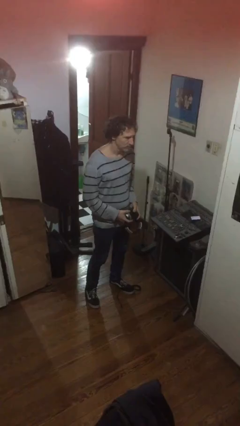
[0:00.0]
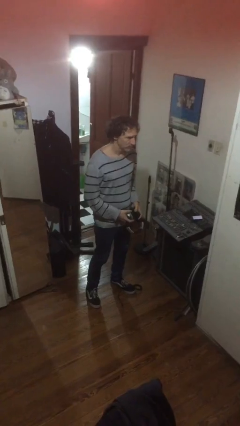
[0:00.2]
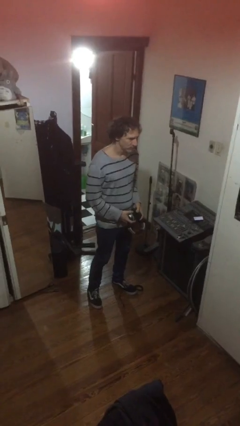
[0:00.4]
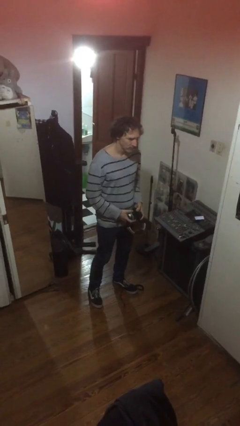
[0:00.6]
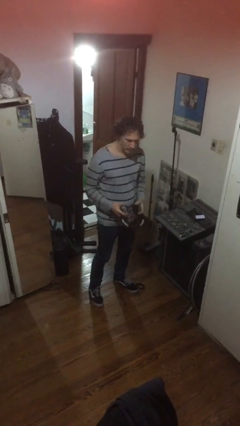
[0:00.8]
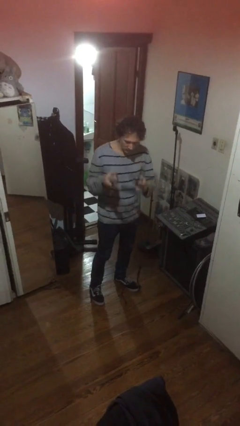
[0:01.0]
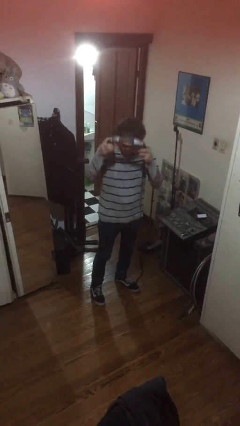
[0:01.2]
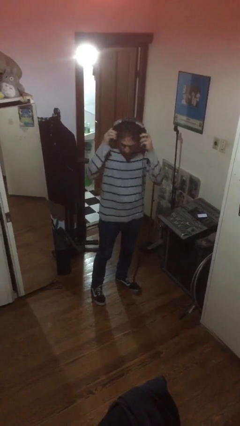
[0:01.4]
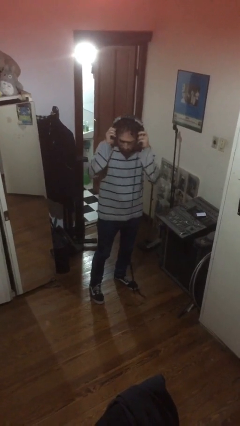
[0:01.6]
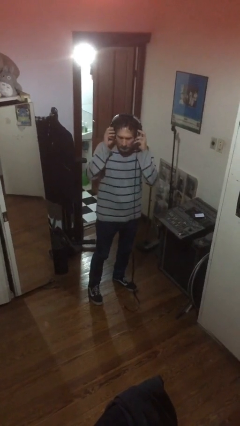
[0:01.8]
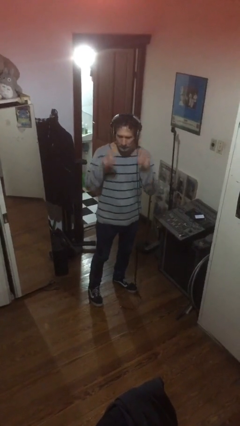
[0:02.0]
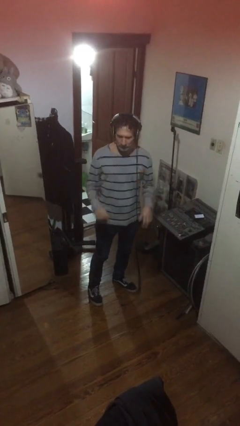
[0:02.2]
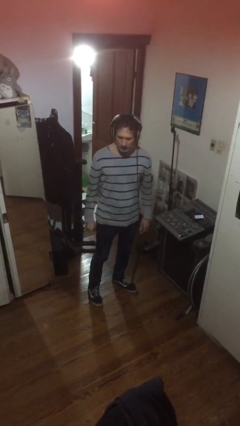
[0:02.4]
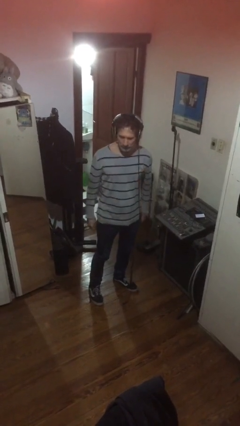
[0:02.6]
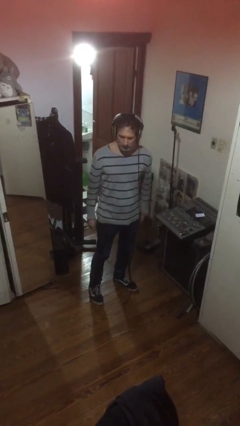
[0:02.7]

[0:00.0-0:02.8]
person puts on headphones

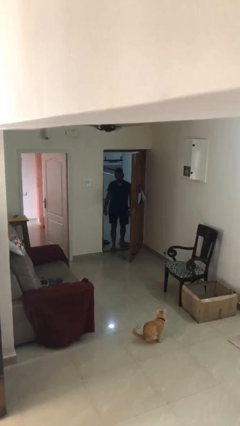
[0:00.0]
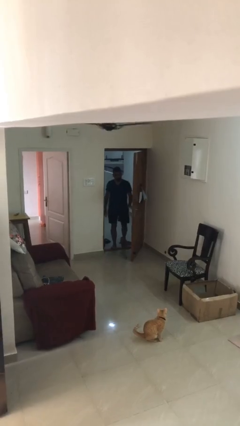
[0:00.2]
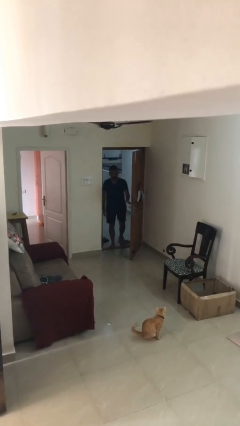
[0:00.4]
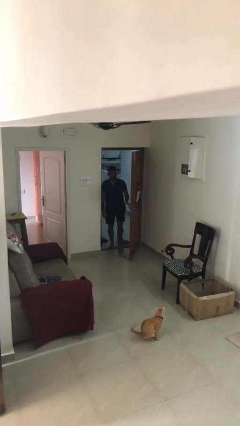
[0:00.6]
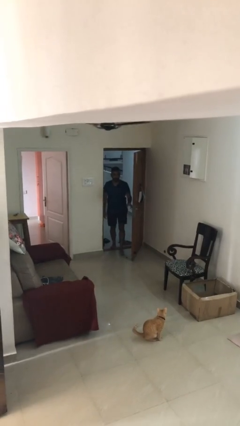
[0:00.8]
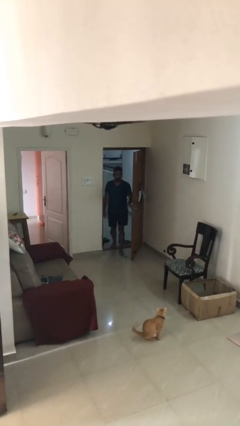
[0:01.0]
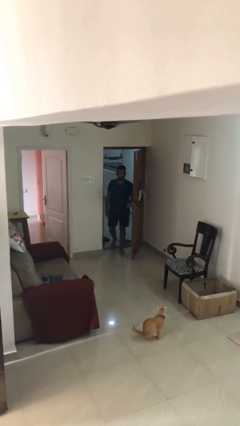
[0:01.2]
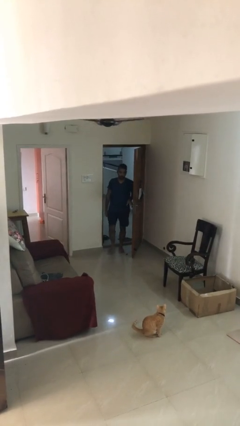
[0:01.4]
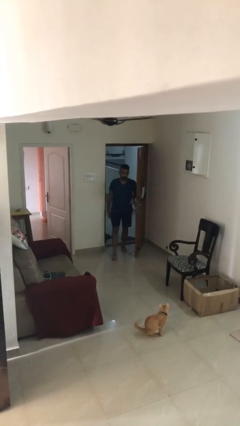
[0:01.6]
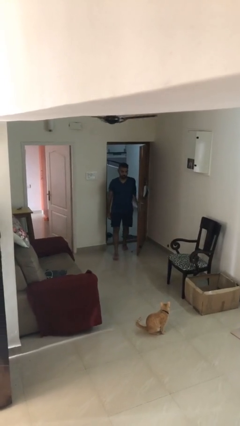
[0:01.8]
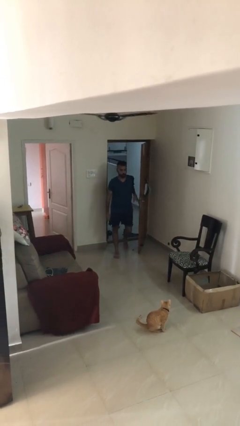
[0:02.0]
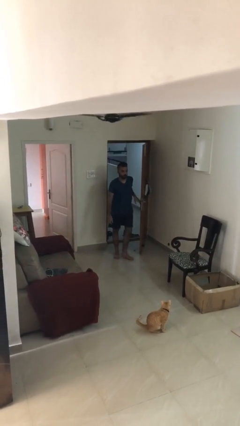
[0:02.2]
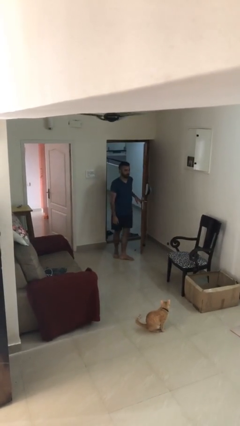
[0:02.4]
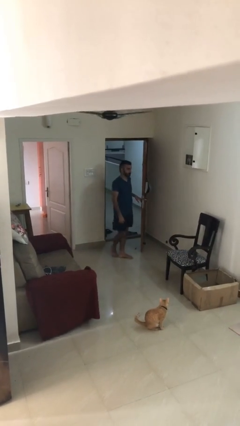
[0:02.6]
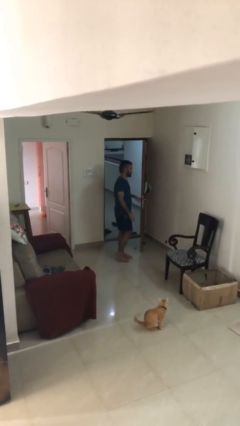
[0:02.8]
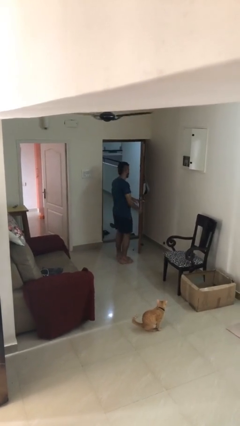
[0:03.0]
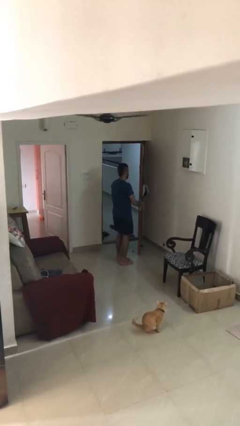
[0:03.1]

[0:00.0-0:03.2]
person enters scene through structure

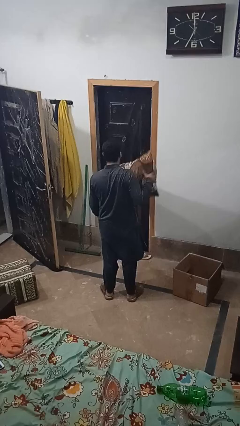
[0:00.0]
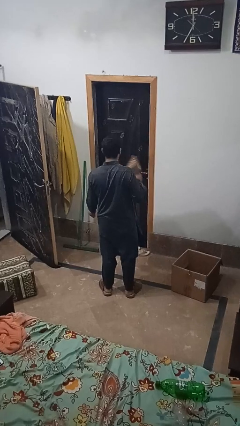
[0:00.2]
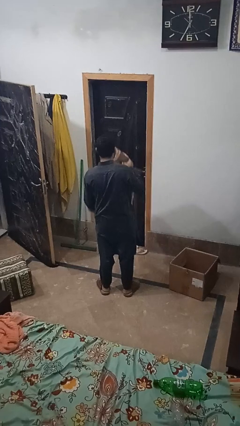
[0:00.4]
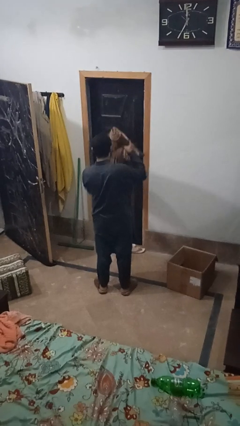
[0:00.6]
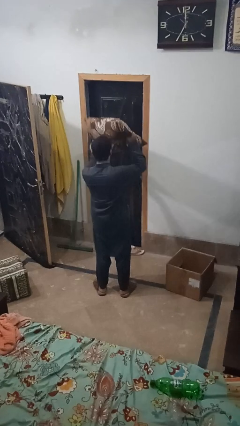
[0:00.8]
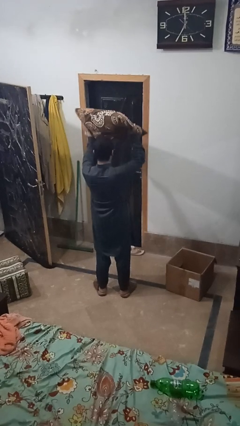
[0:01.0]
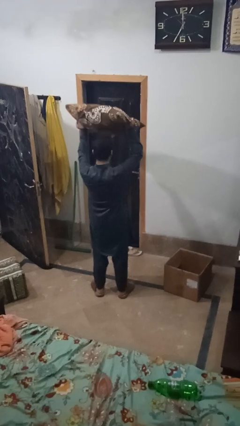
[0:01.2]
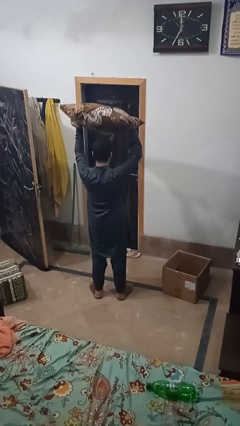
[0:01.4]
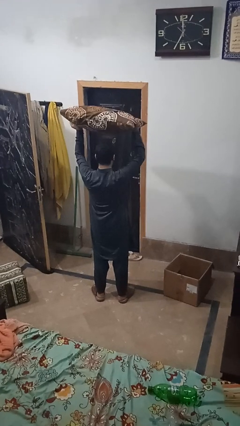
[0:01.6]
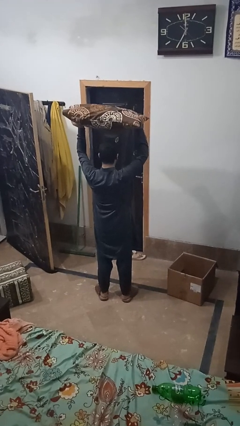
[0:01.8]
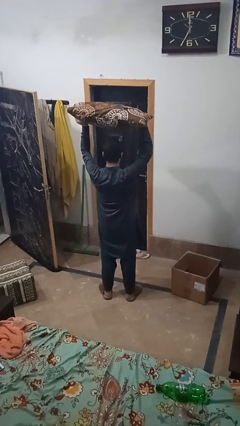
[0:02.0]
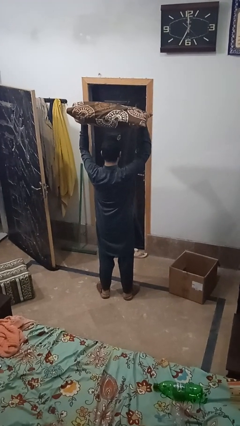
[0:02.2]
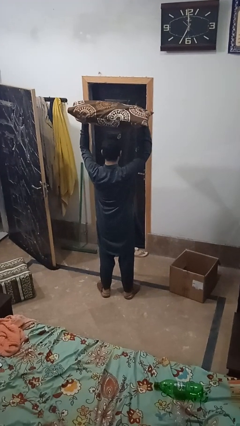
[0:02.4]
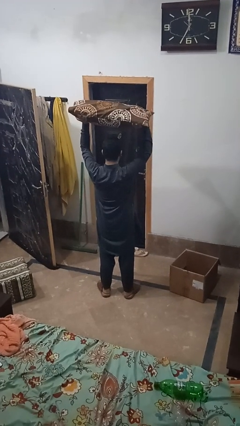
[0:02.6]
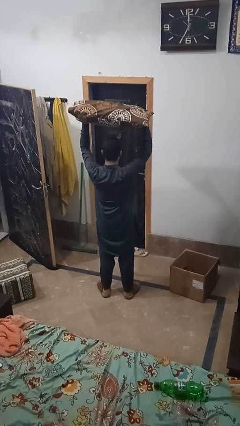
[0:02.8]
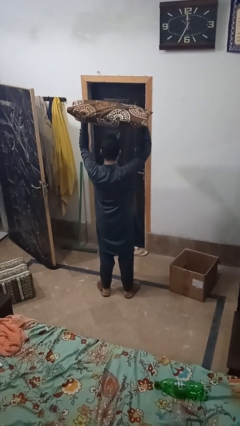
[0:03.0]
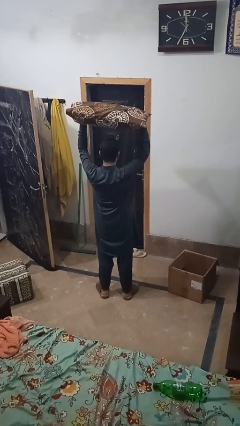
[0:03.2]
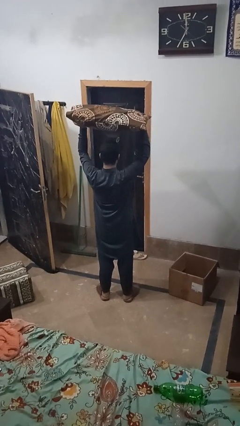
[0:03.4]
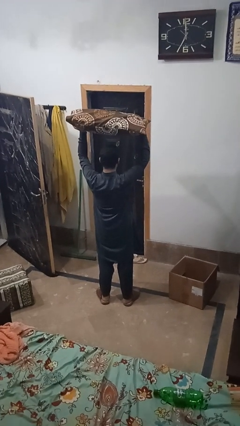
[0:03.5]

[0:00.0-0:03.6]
person holds object above head

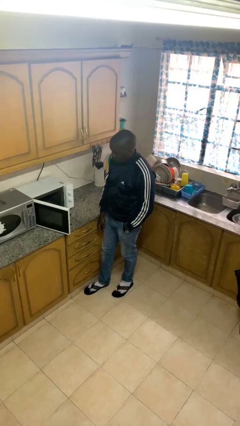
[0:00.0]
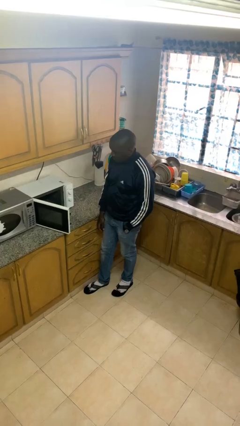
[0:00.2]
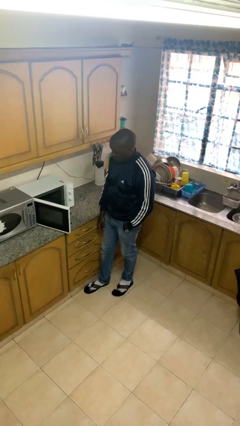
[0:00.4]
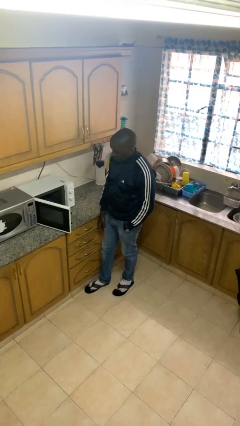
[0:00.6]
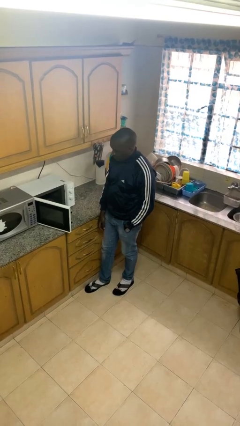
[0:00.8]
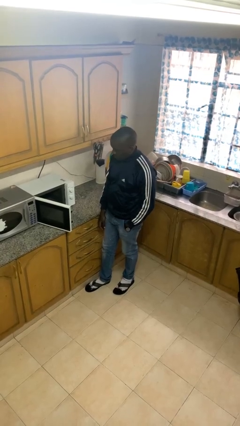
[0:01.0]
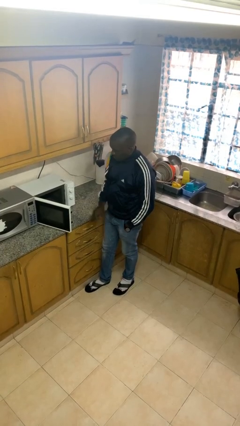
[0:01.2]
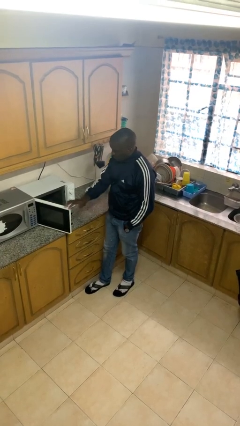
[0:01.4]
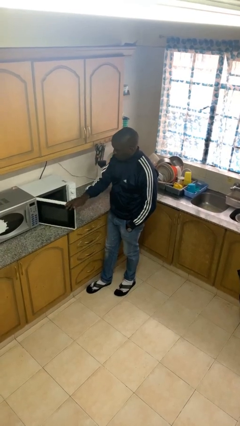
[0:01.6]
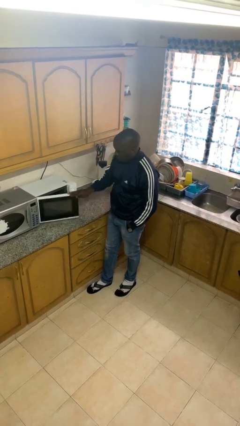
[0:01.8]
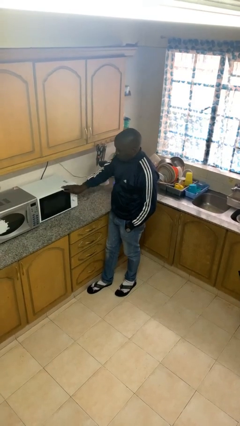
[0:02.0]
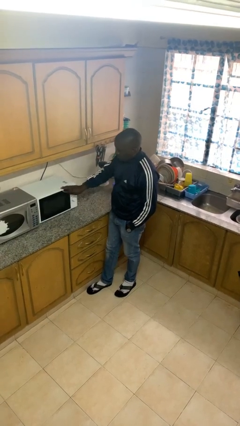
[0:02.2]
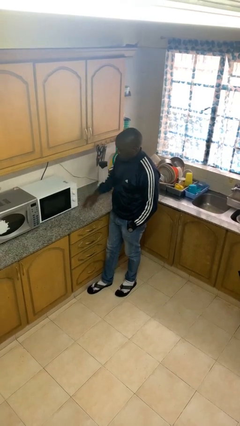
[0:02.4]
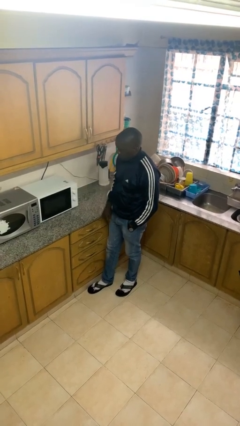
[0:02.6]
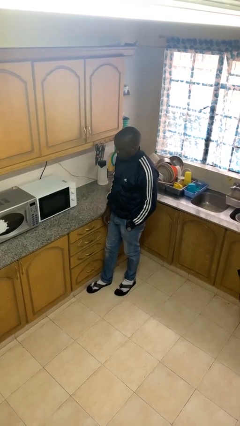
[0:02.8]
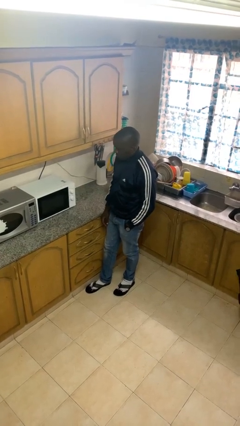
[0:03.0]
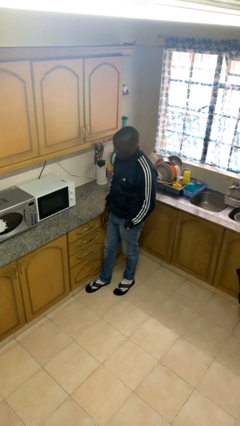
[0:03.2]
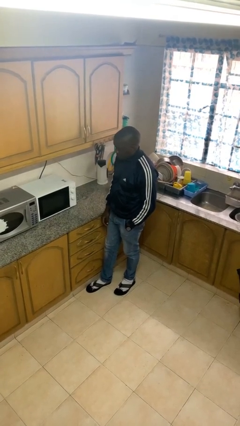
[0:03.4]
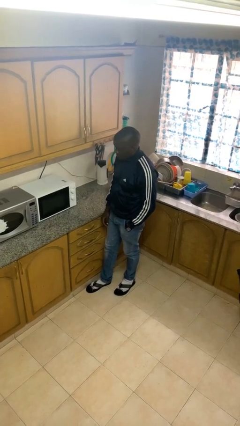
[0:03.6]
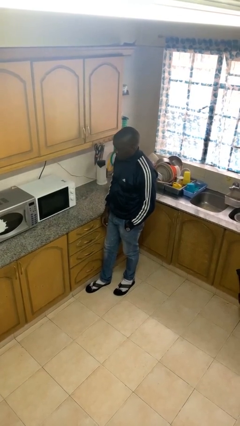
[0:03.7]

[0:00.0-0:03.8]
person closes microwave

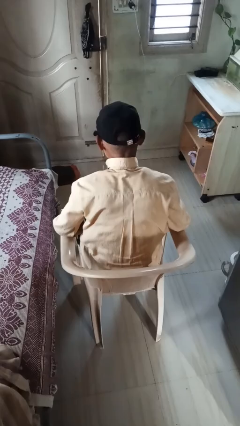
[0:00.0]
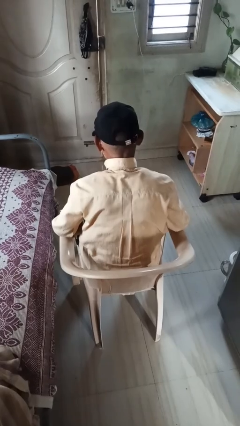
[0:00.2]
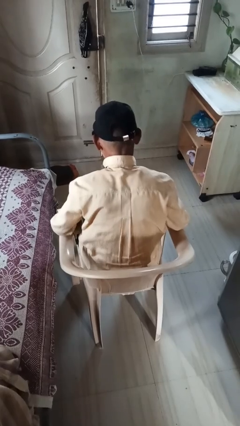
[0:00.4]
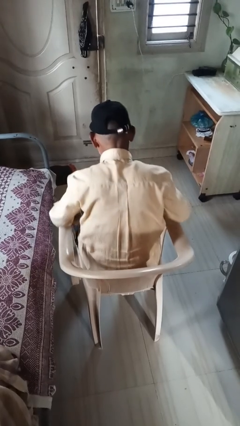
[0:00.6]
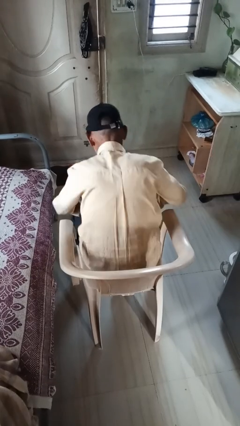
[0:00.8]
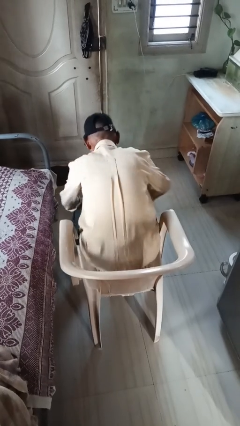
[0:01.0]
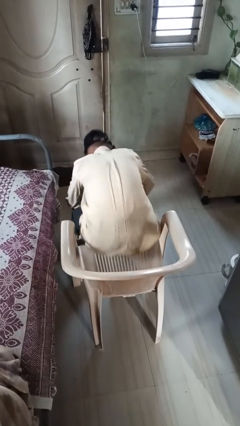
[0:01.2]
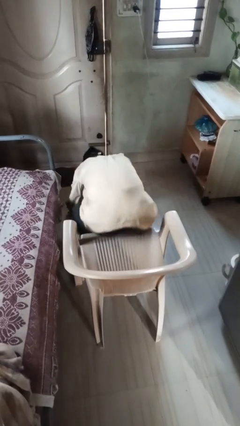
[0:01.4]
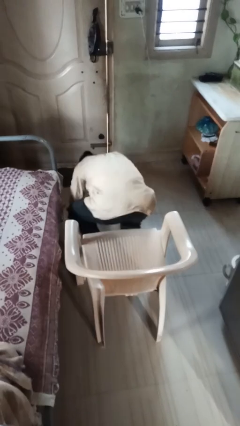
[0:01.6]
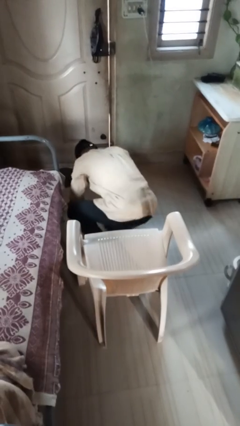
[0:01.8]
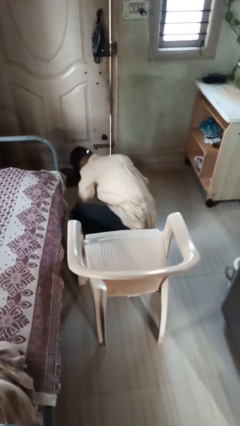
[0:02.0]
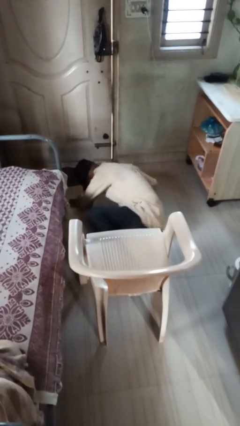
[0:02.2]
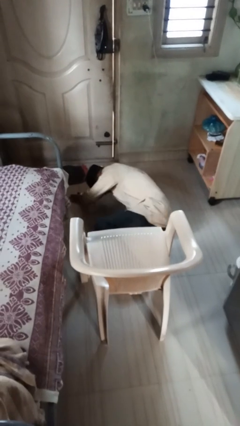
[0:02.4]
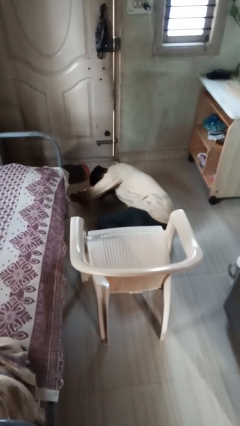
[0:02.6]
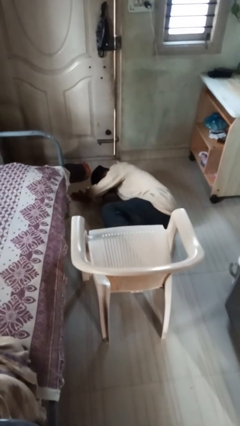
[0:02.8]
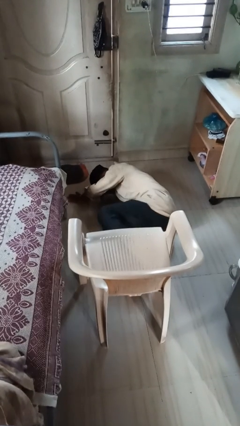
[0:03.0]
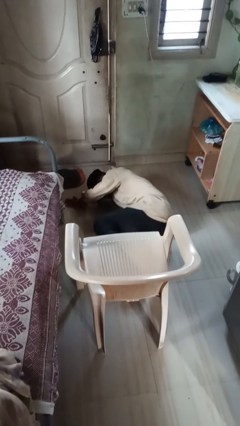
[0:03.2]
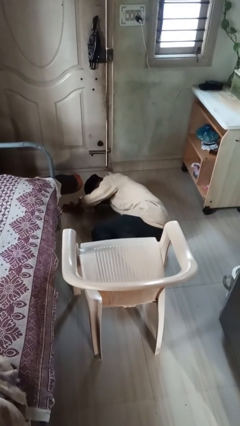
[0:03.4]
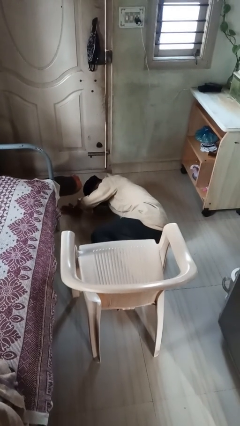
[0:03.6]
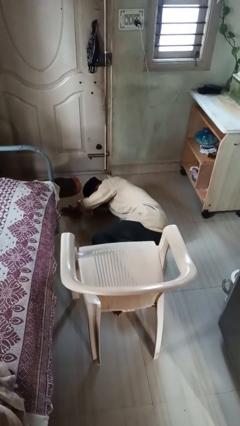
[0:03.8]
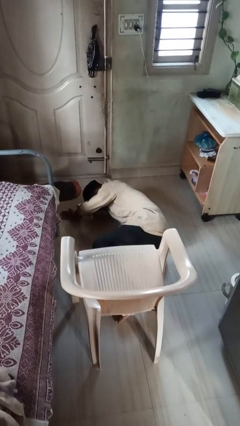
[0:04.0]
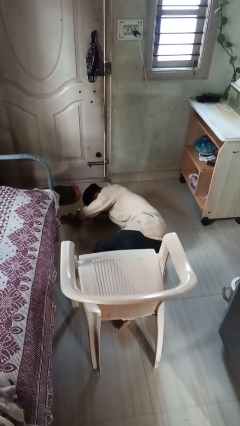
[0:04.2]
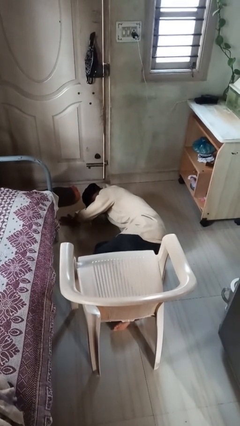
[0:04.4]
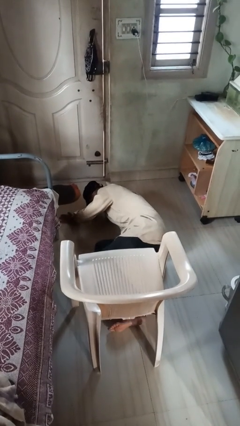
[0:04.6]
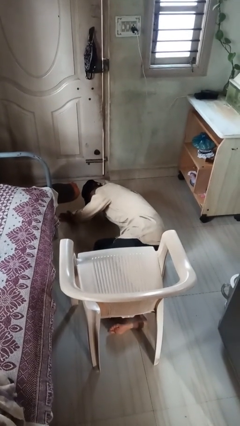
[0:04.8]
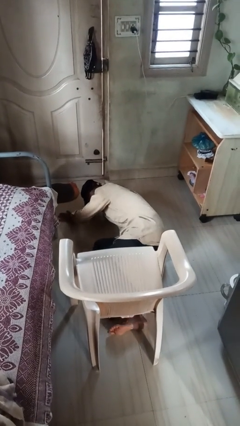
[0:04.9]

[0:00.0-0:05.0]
person falls from chair
